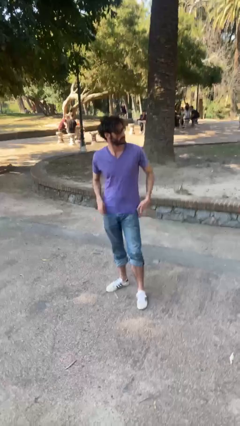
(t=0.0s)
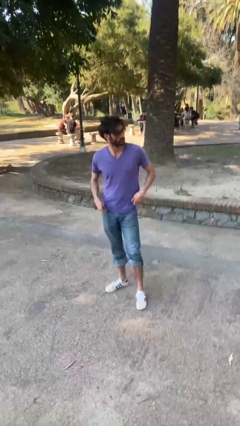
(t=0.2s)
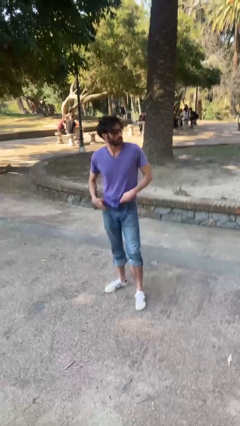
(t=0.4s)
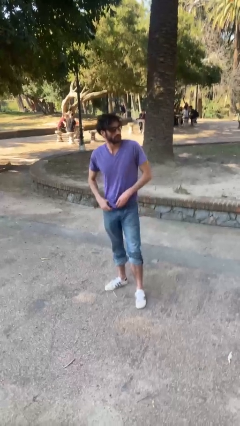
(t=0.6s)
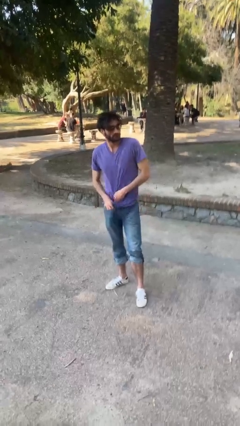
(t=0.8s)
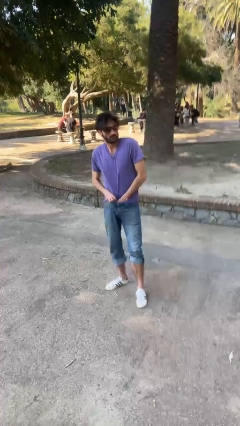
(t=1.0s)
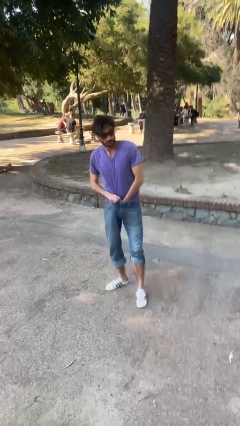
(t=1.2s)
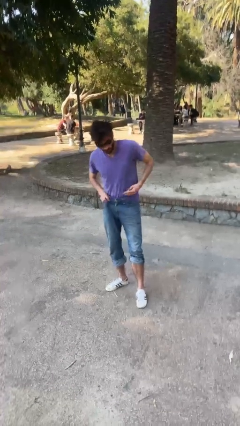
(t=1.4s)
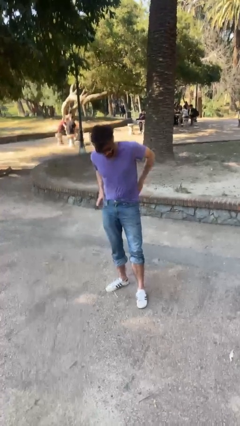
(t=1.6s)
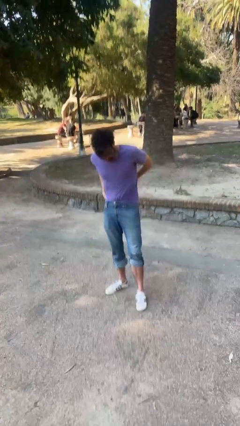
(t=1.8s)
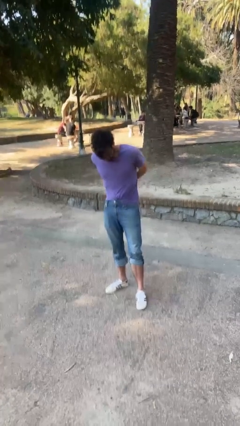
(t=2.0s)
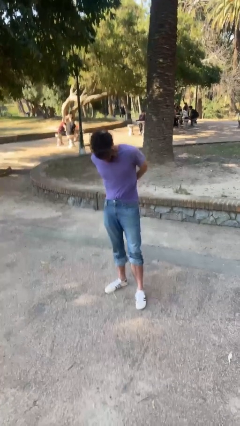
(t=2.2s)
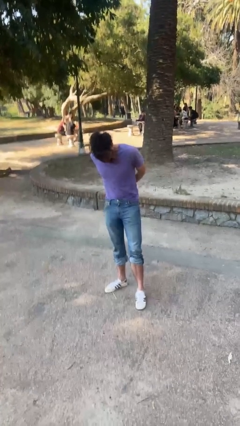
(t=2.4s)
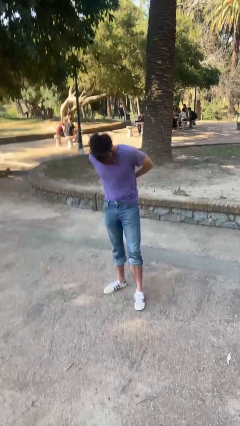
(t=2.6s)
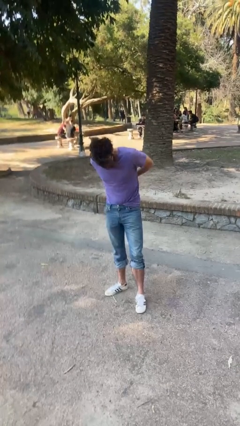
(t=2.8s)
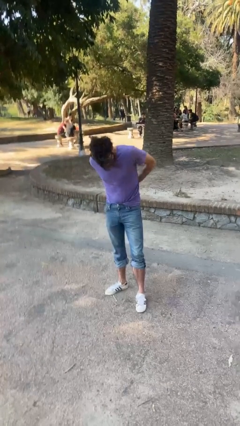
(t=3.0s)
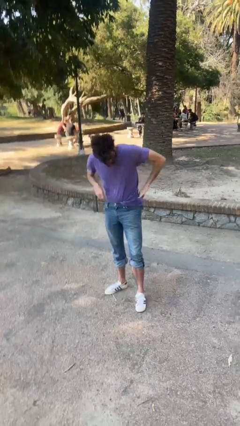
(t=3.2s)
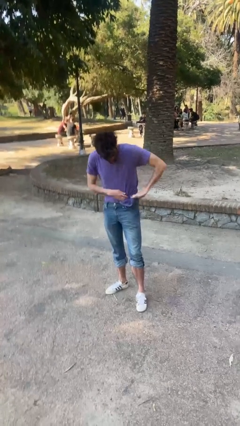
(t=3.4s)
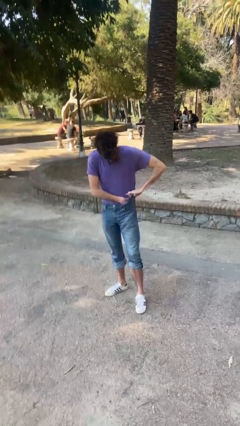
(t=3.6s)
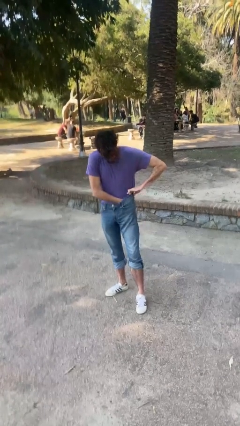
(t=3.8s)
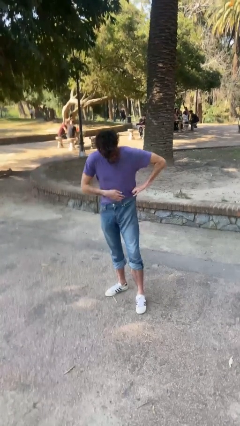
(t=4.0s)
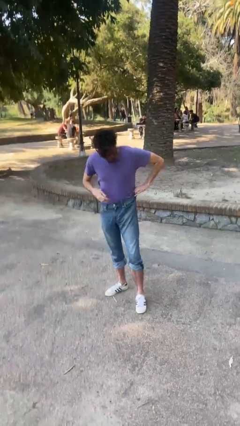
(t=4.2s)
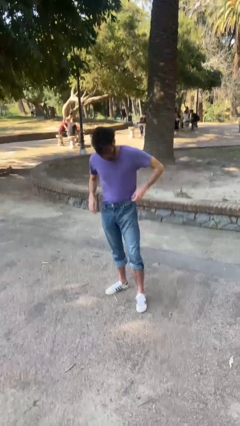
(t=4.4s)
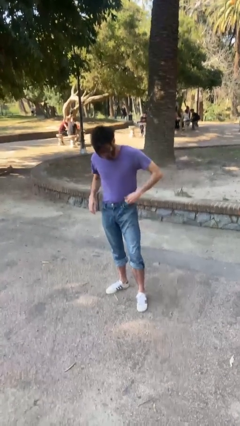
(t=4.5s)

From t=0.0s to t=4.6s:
person tucks in shirt

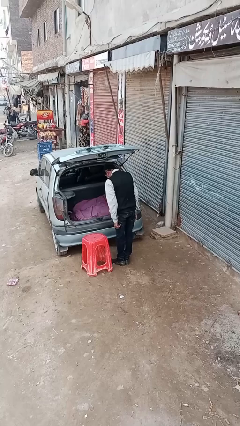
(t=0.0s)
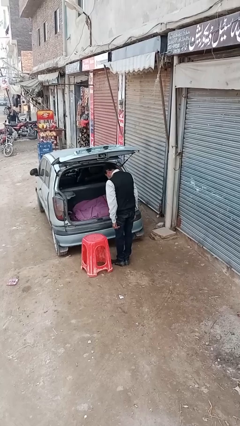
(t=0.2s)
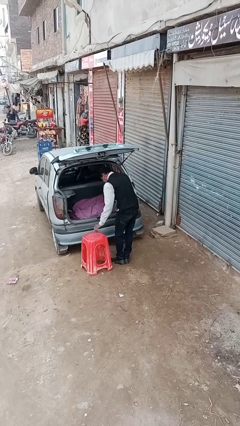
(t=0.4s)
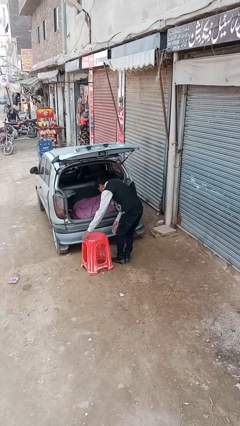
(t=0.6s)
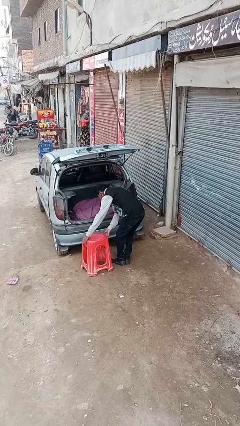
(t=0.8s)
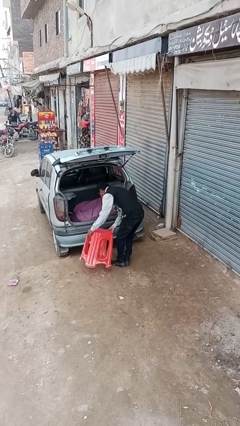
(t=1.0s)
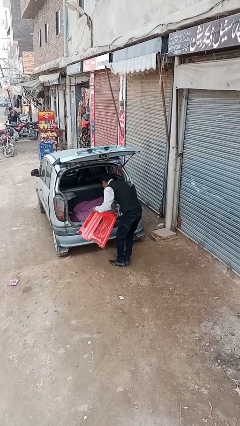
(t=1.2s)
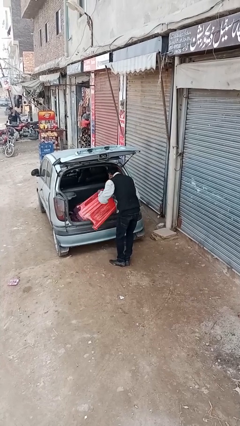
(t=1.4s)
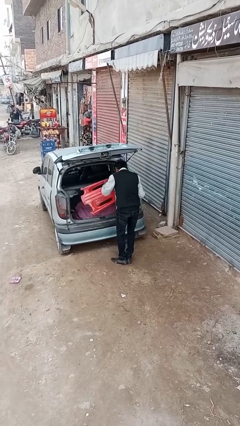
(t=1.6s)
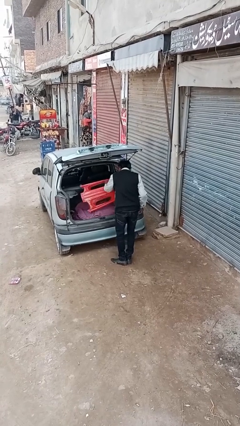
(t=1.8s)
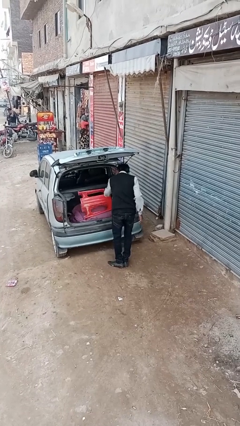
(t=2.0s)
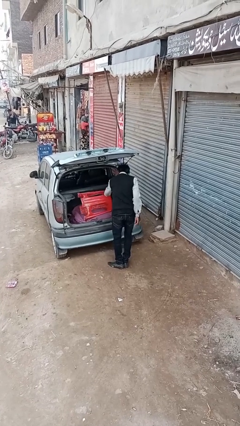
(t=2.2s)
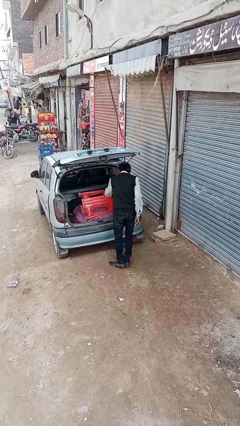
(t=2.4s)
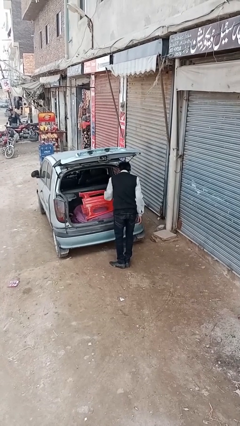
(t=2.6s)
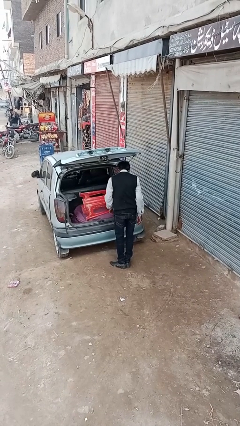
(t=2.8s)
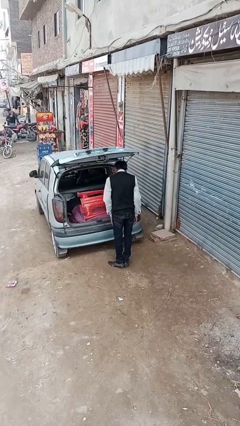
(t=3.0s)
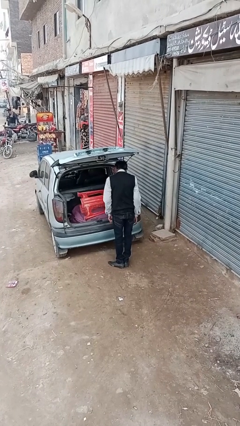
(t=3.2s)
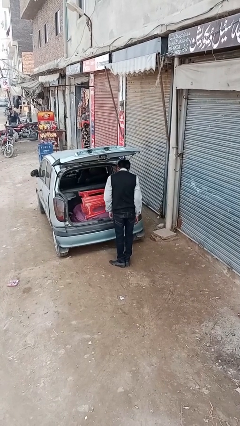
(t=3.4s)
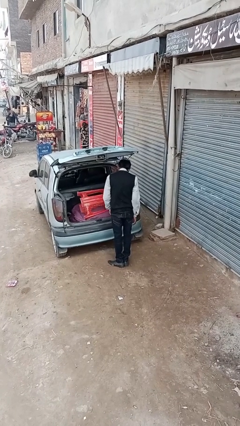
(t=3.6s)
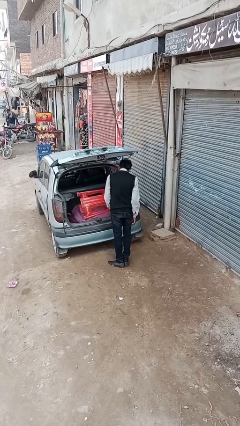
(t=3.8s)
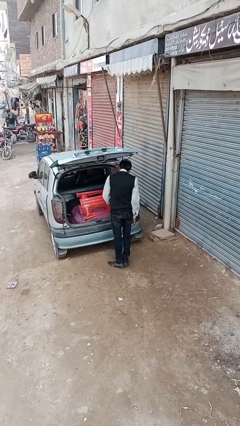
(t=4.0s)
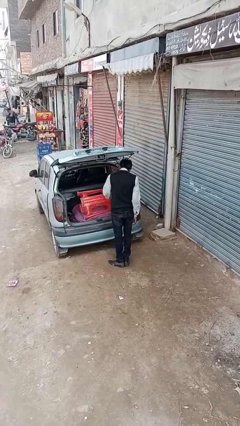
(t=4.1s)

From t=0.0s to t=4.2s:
person loads car

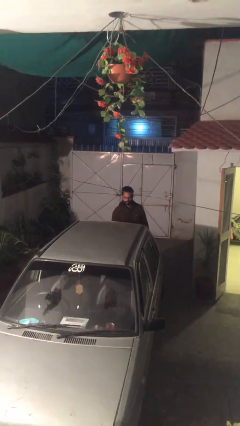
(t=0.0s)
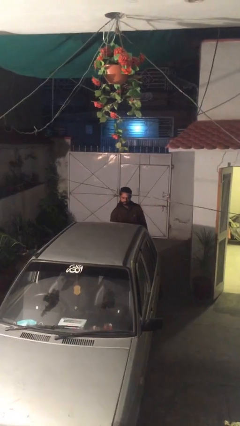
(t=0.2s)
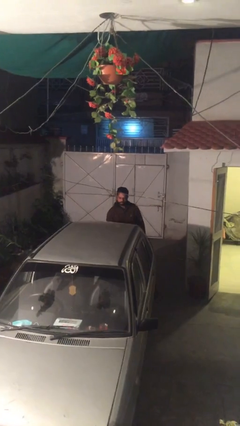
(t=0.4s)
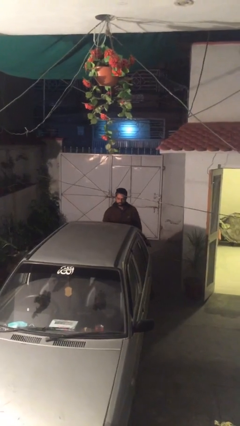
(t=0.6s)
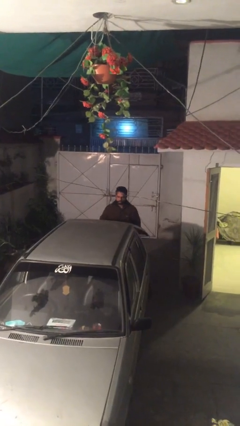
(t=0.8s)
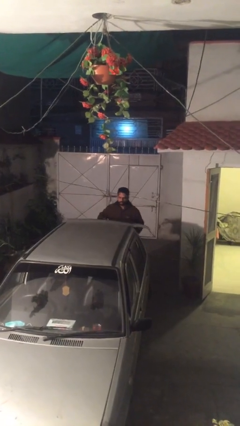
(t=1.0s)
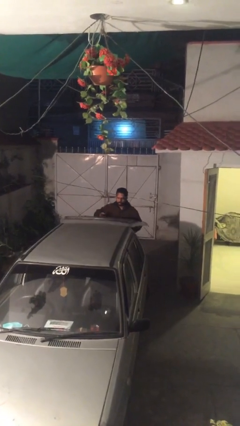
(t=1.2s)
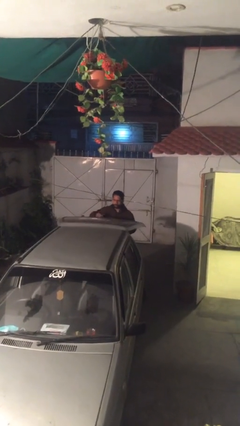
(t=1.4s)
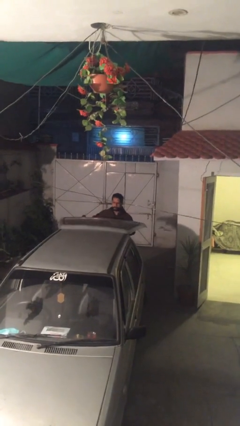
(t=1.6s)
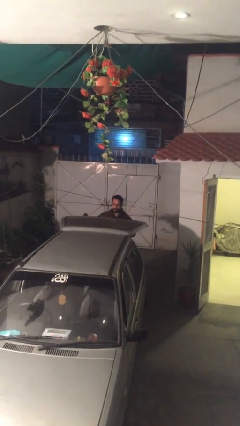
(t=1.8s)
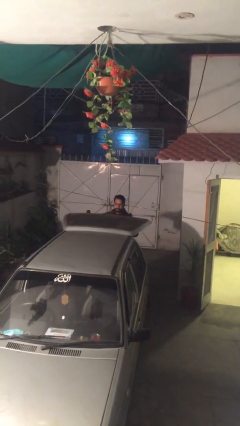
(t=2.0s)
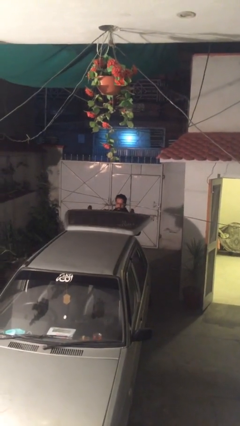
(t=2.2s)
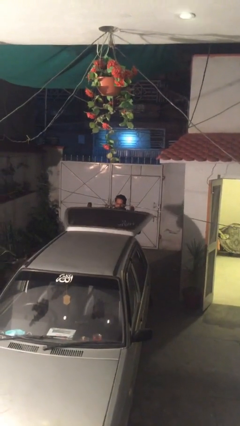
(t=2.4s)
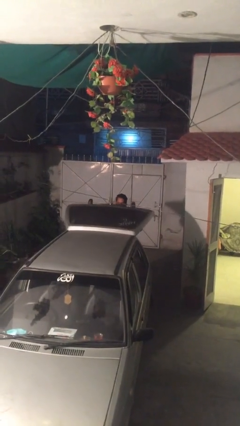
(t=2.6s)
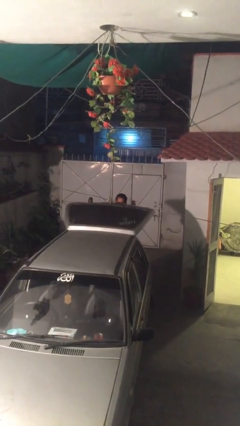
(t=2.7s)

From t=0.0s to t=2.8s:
person opens car trunk

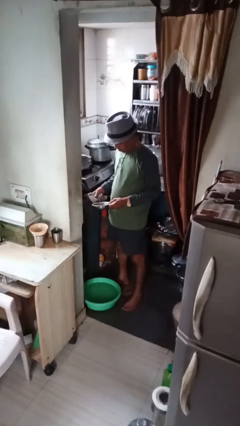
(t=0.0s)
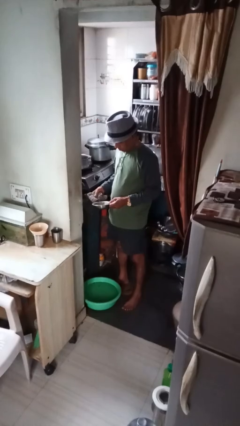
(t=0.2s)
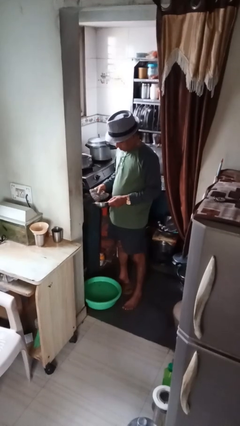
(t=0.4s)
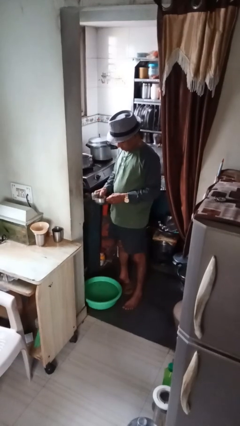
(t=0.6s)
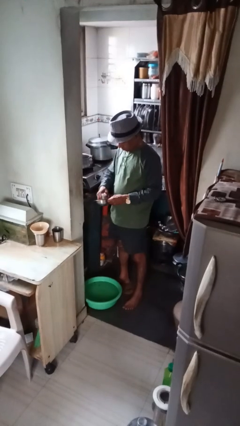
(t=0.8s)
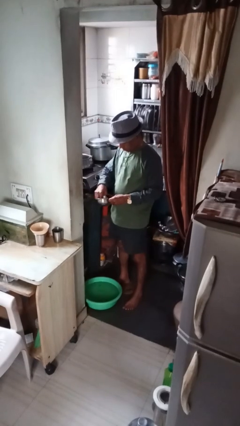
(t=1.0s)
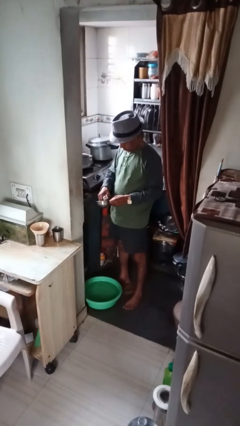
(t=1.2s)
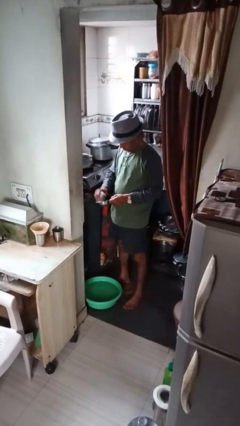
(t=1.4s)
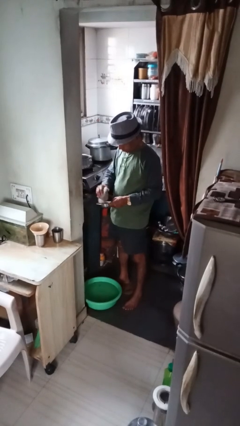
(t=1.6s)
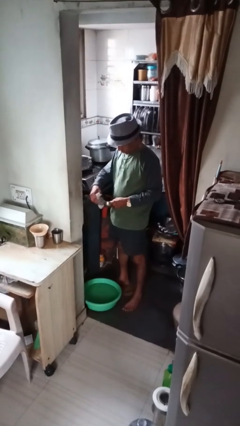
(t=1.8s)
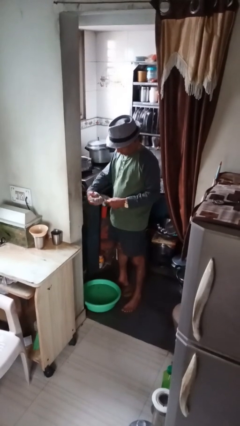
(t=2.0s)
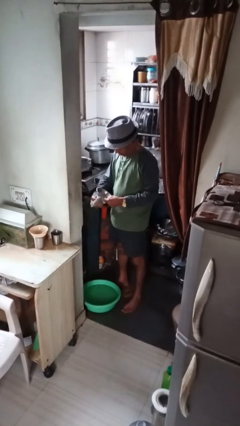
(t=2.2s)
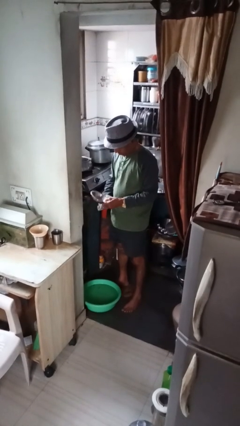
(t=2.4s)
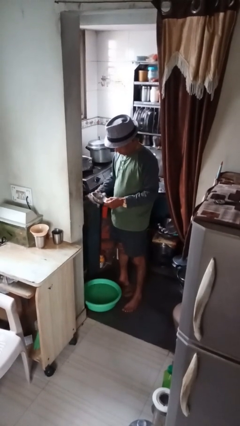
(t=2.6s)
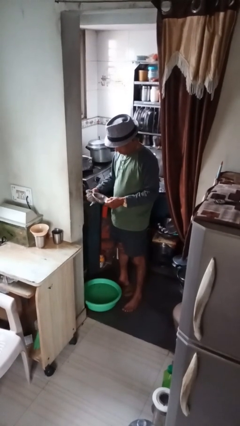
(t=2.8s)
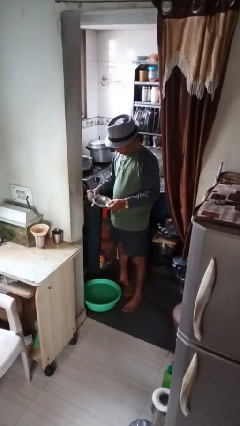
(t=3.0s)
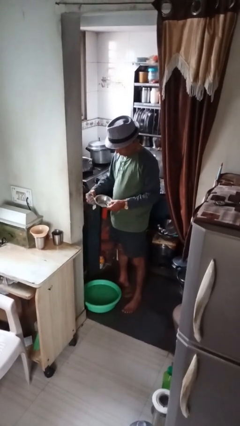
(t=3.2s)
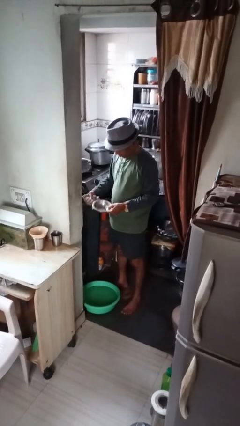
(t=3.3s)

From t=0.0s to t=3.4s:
person dries dish

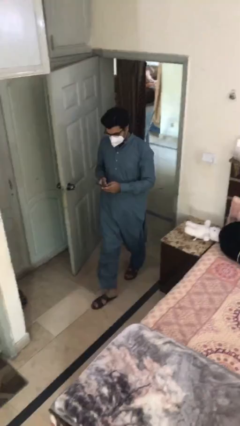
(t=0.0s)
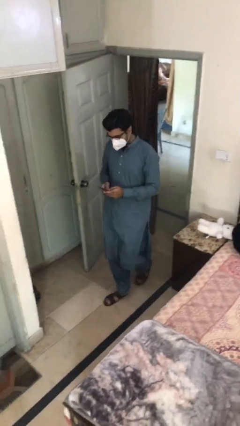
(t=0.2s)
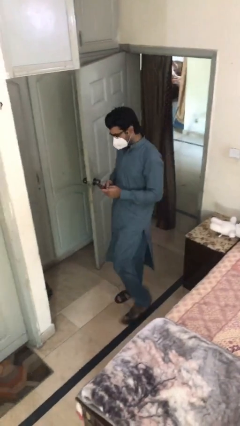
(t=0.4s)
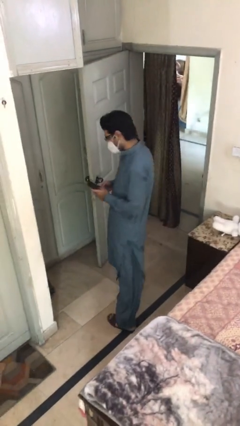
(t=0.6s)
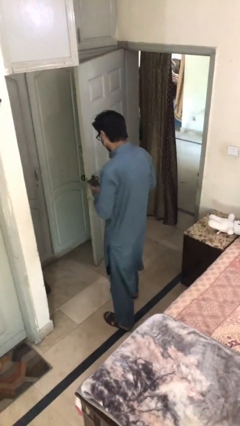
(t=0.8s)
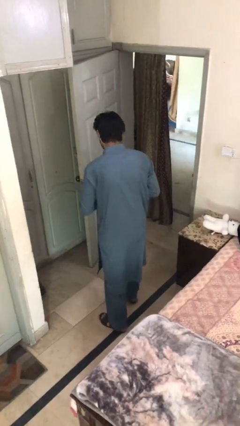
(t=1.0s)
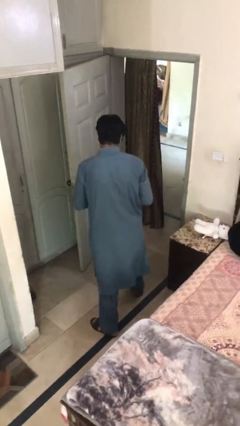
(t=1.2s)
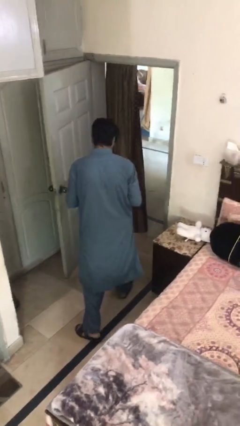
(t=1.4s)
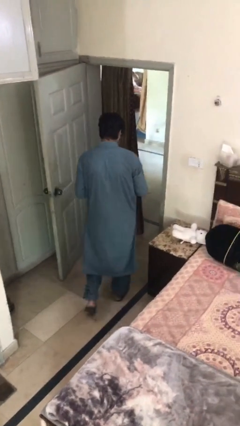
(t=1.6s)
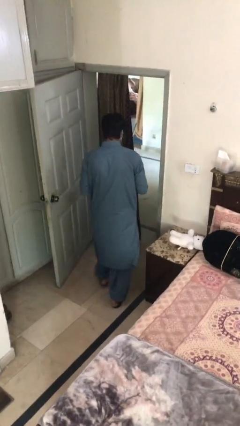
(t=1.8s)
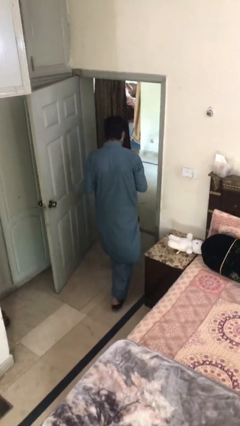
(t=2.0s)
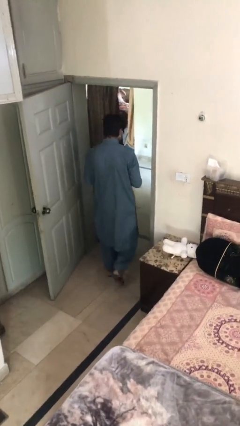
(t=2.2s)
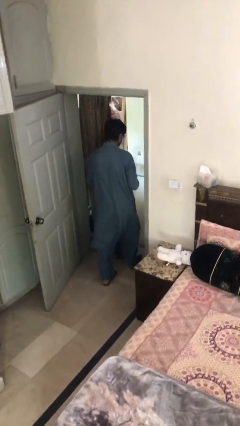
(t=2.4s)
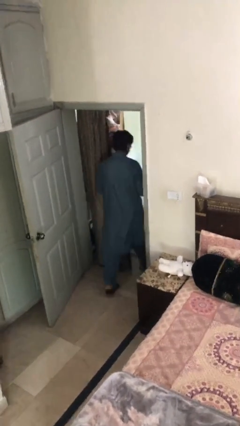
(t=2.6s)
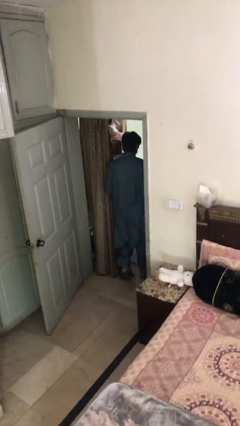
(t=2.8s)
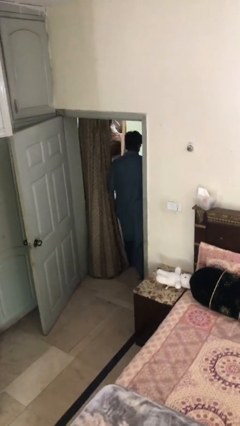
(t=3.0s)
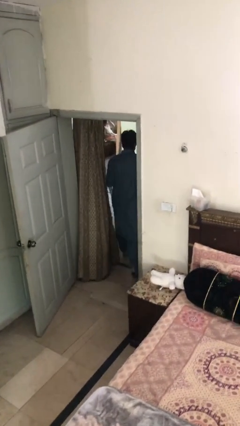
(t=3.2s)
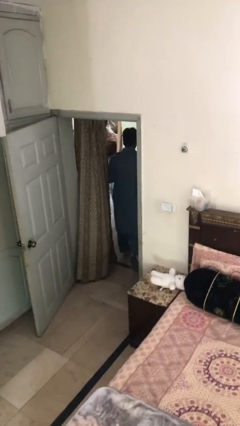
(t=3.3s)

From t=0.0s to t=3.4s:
person exits scene through structure
